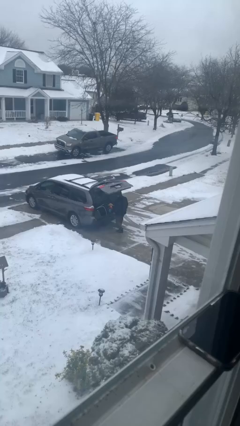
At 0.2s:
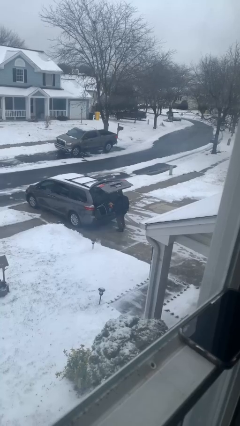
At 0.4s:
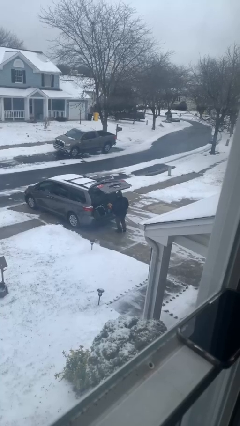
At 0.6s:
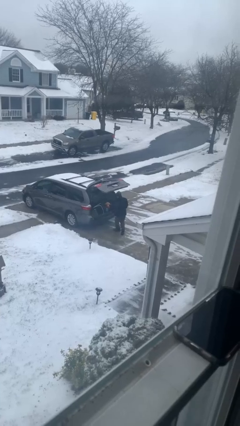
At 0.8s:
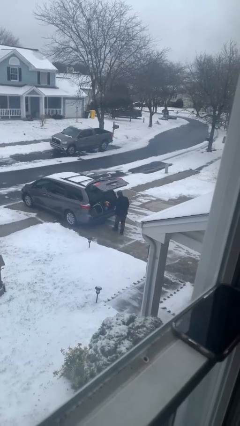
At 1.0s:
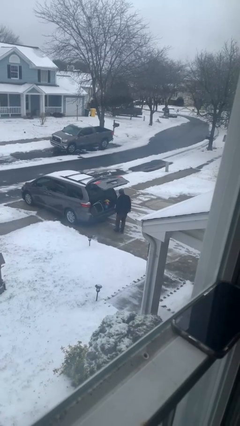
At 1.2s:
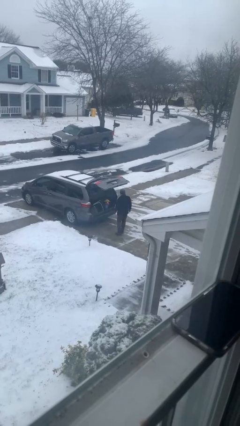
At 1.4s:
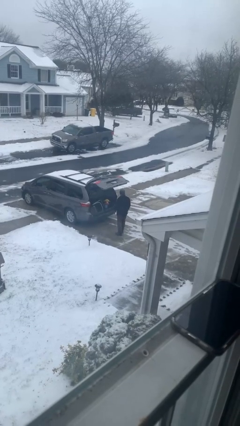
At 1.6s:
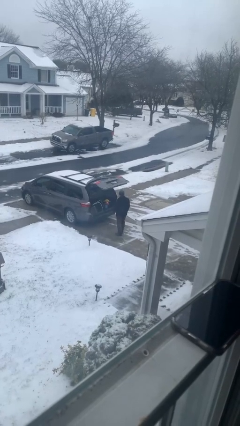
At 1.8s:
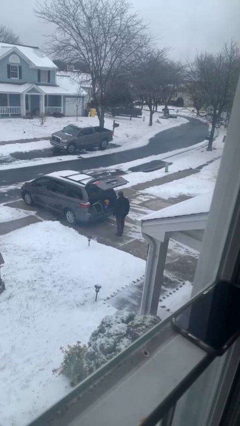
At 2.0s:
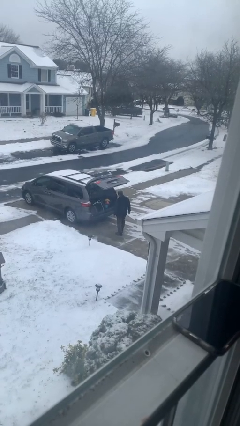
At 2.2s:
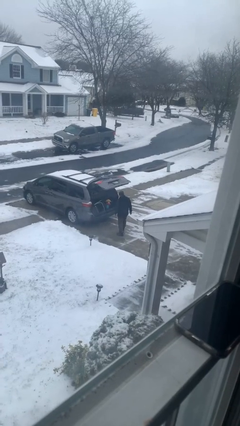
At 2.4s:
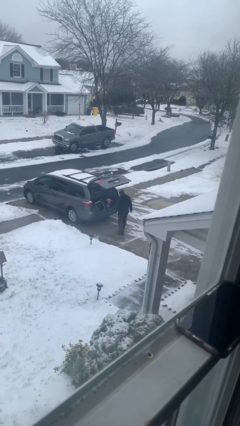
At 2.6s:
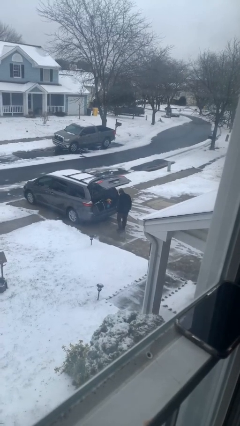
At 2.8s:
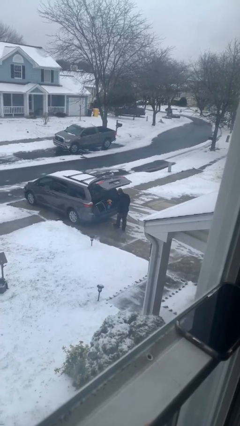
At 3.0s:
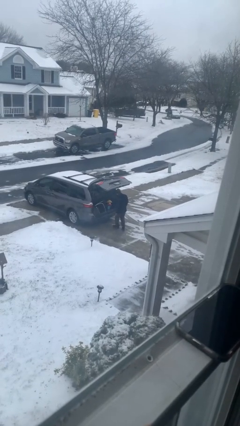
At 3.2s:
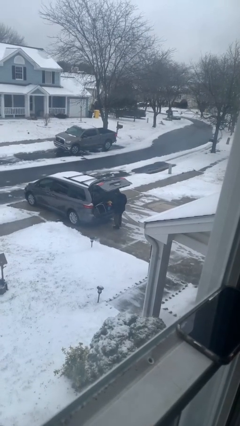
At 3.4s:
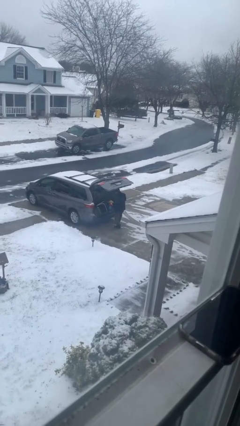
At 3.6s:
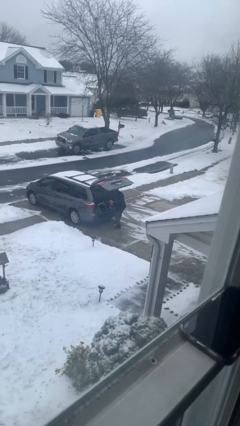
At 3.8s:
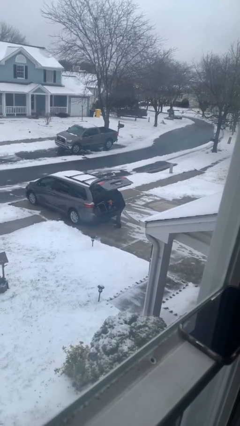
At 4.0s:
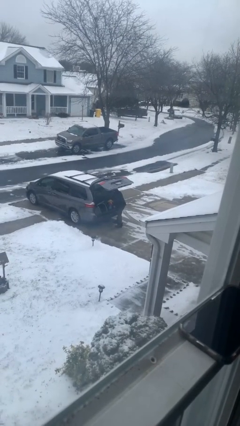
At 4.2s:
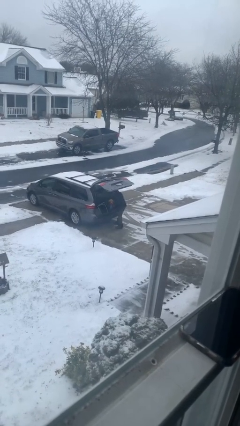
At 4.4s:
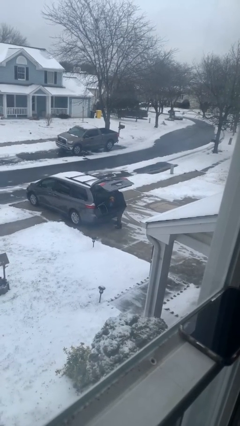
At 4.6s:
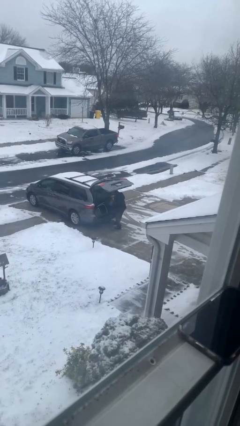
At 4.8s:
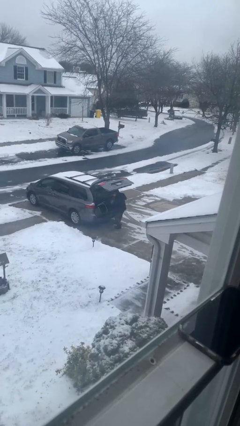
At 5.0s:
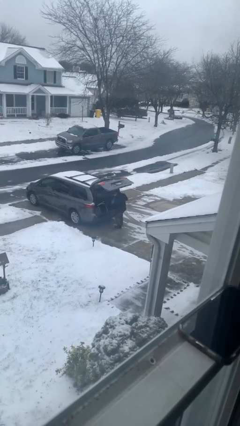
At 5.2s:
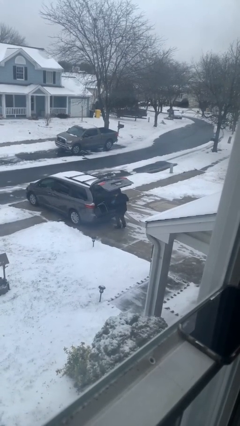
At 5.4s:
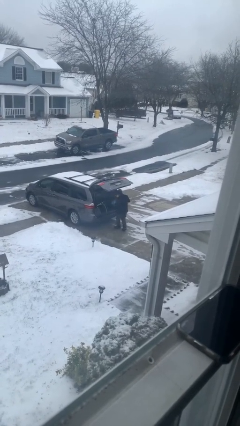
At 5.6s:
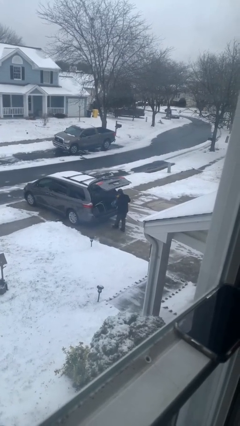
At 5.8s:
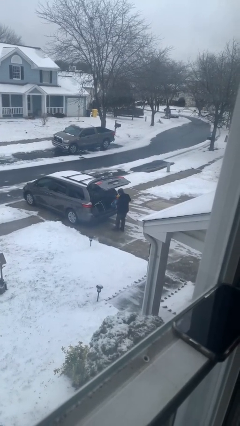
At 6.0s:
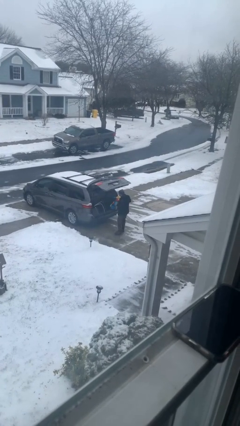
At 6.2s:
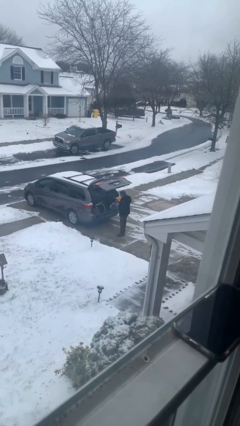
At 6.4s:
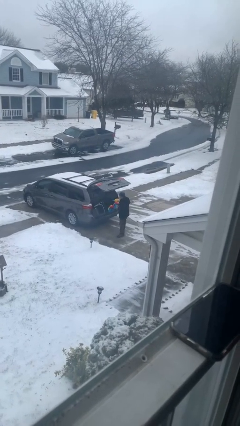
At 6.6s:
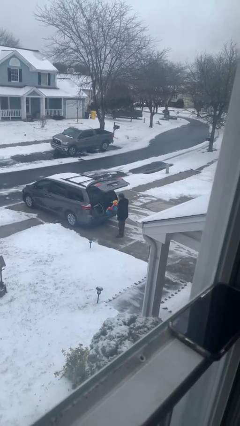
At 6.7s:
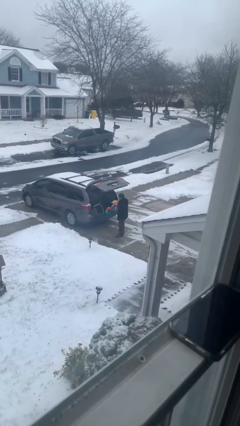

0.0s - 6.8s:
person unloads car

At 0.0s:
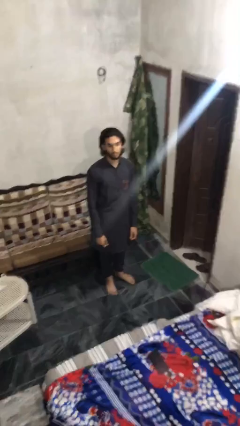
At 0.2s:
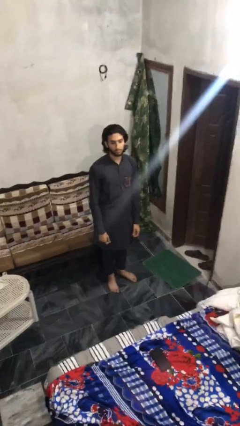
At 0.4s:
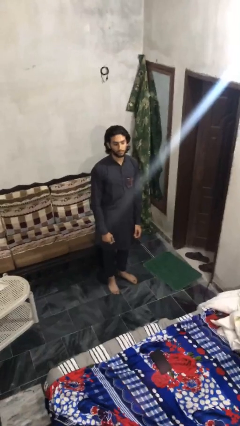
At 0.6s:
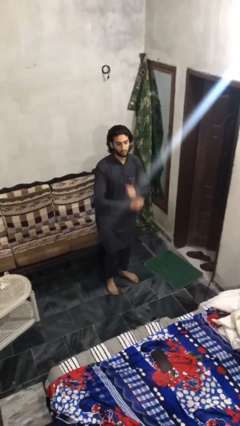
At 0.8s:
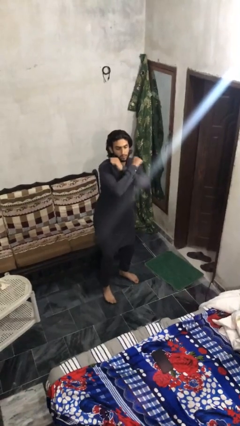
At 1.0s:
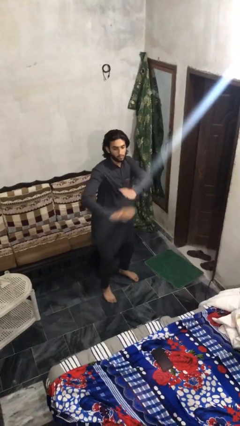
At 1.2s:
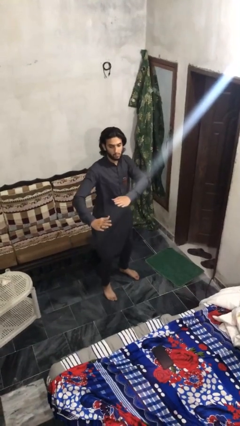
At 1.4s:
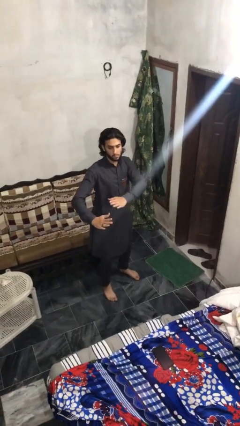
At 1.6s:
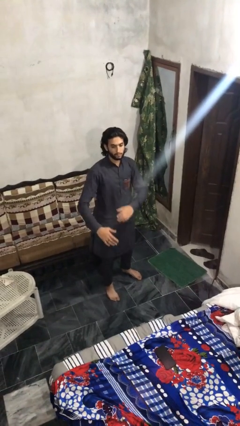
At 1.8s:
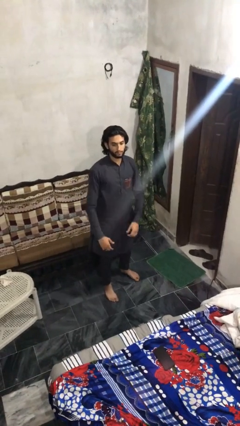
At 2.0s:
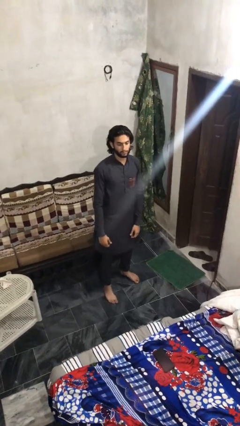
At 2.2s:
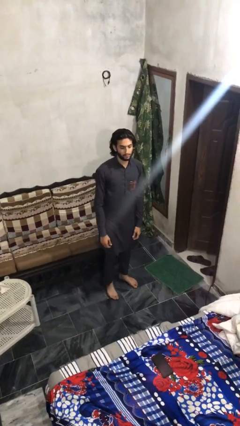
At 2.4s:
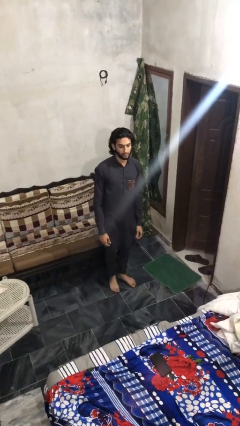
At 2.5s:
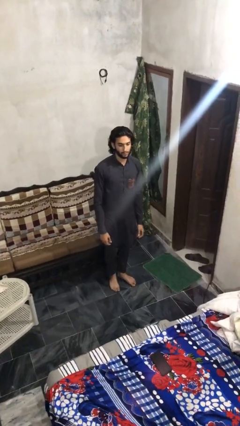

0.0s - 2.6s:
person karate chop

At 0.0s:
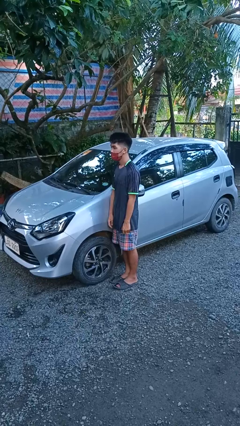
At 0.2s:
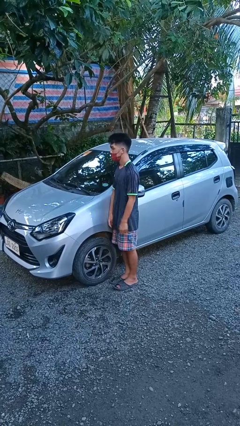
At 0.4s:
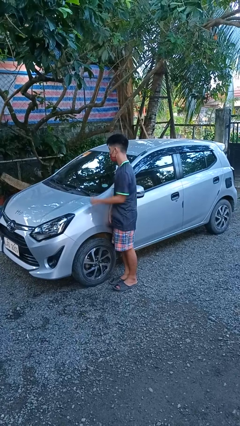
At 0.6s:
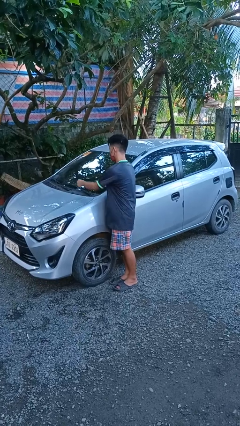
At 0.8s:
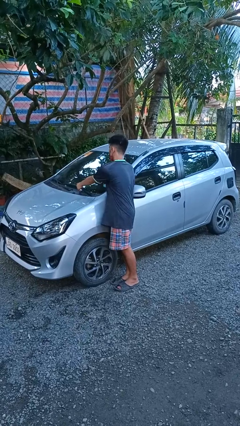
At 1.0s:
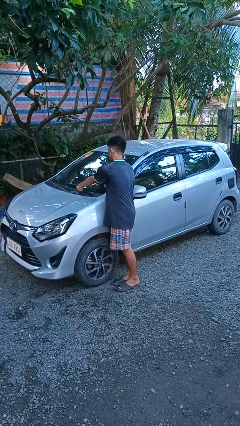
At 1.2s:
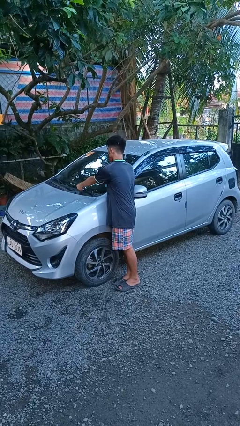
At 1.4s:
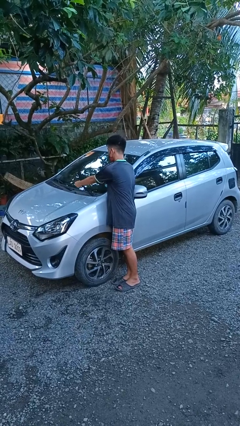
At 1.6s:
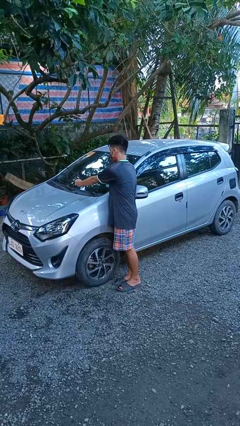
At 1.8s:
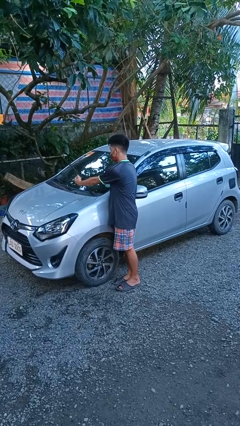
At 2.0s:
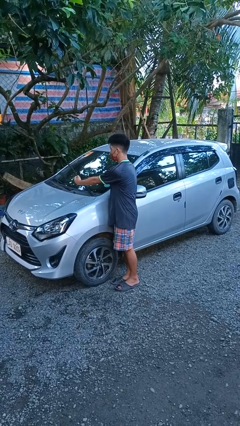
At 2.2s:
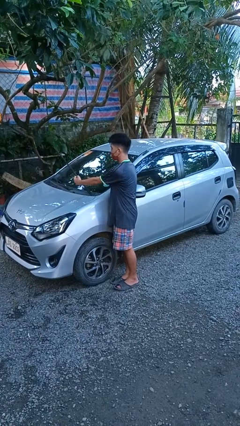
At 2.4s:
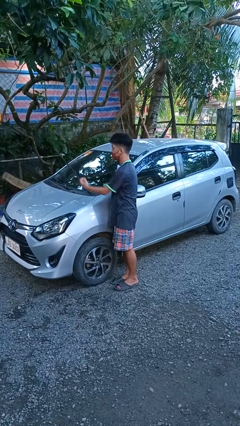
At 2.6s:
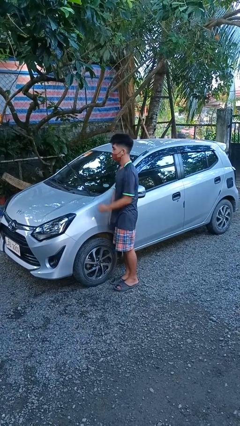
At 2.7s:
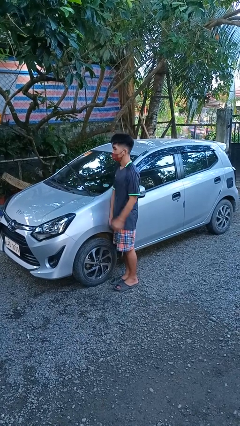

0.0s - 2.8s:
person flips up car wipers

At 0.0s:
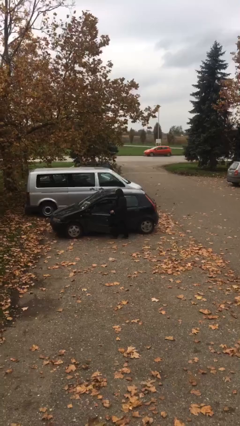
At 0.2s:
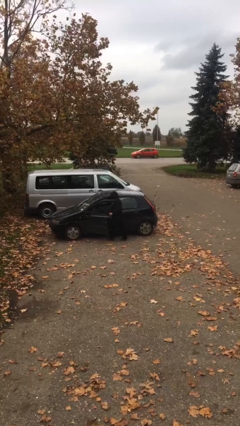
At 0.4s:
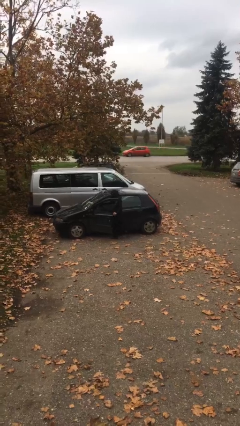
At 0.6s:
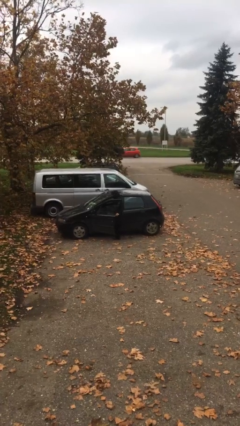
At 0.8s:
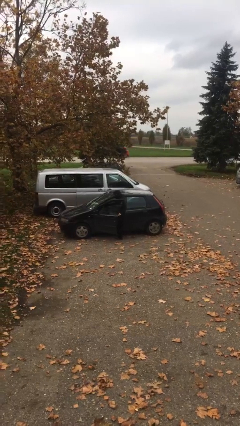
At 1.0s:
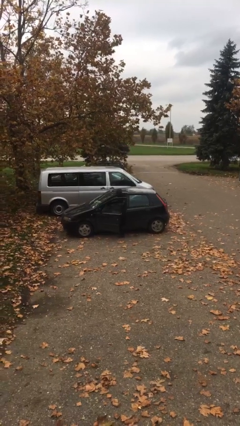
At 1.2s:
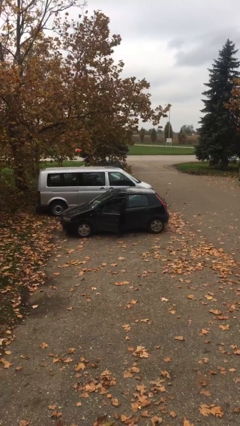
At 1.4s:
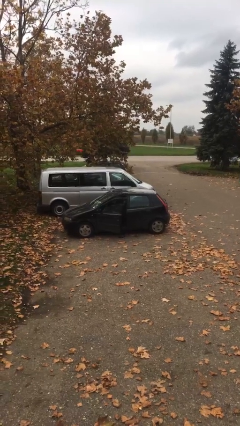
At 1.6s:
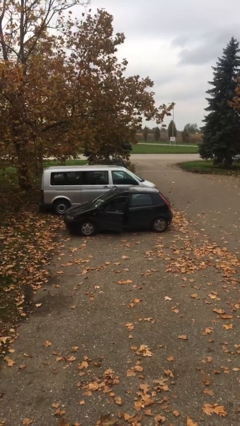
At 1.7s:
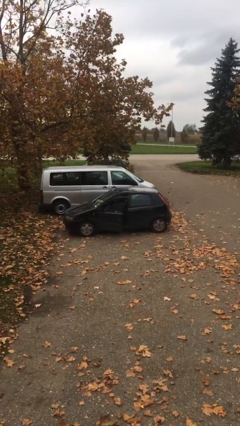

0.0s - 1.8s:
person enters car

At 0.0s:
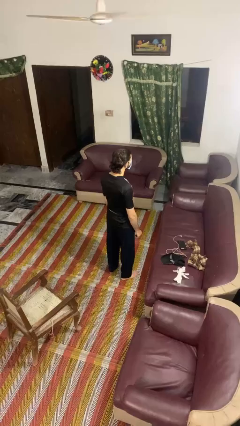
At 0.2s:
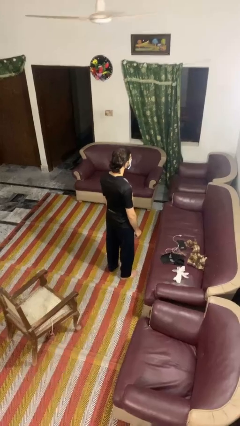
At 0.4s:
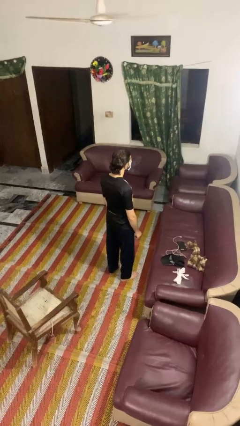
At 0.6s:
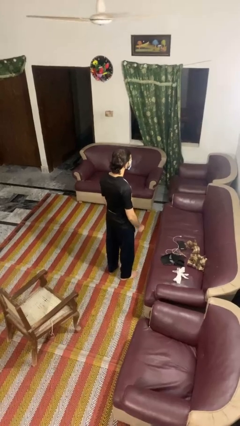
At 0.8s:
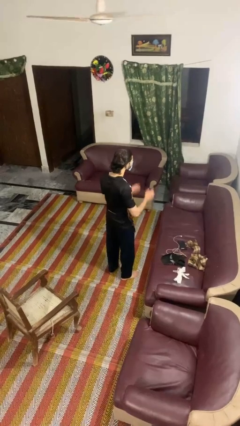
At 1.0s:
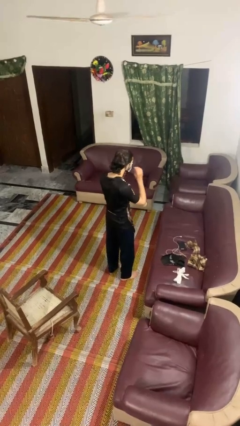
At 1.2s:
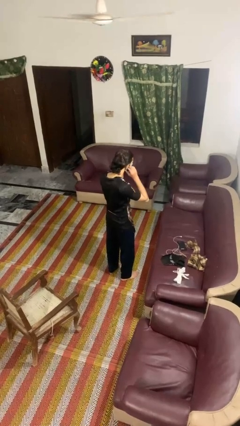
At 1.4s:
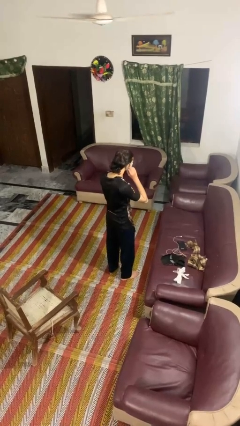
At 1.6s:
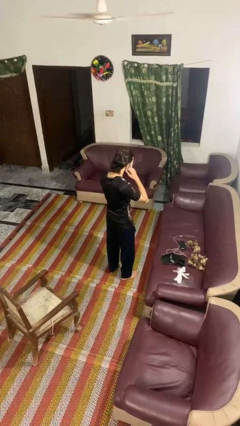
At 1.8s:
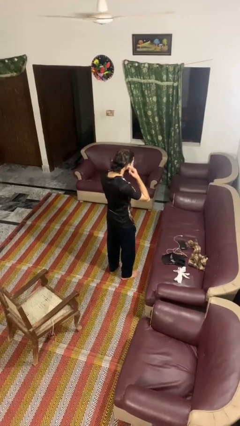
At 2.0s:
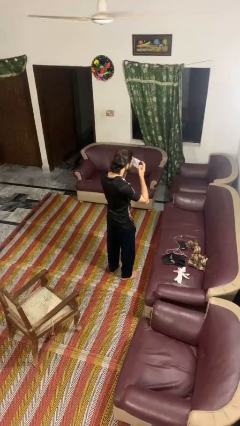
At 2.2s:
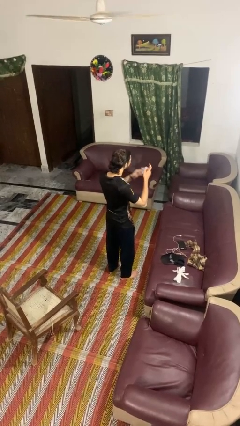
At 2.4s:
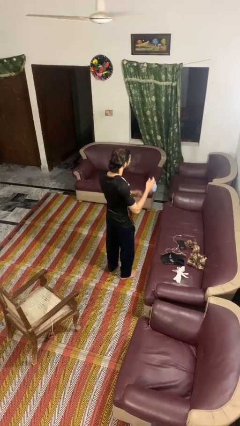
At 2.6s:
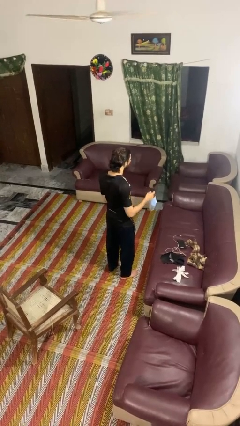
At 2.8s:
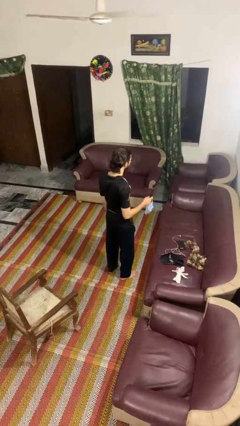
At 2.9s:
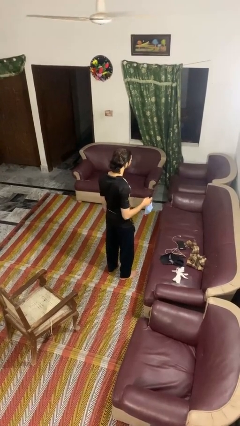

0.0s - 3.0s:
person takes off facemask

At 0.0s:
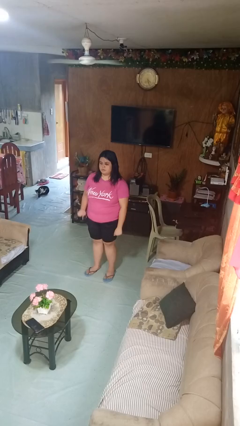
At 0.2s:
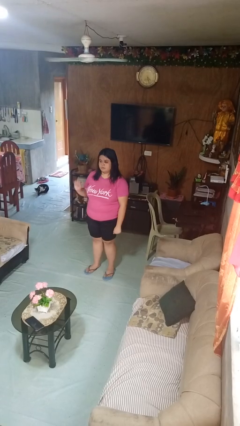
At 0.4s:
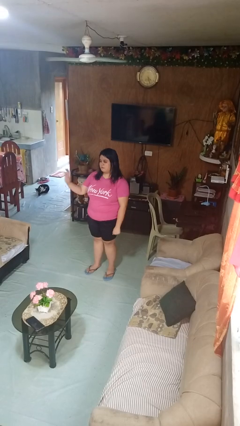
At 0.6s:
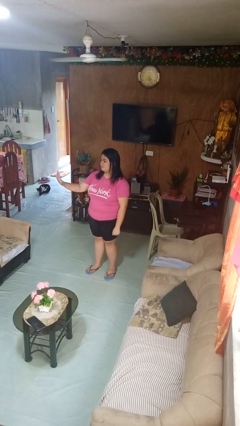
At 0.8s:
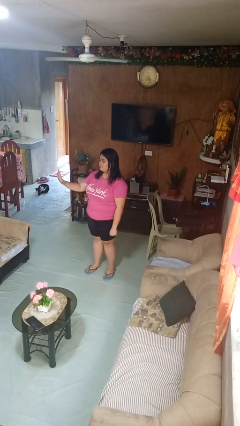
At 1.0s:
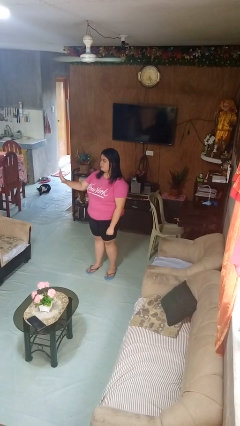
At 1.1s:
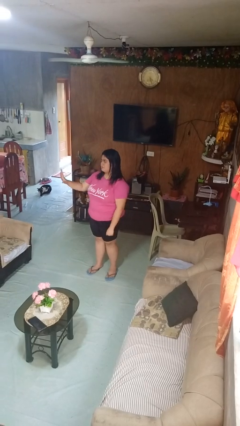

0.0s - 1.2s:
person gestures stop
